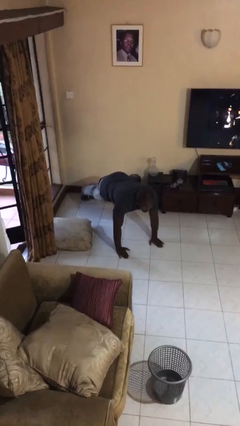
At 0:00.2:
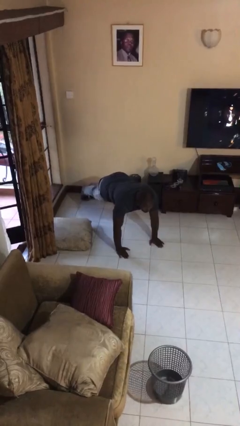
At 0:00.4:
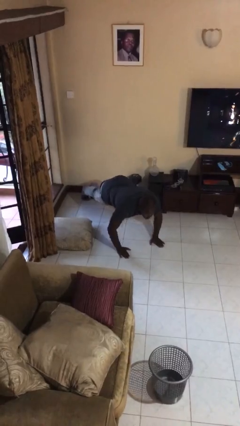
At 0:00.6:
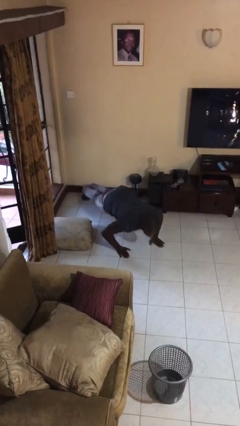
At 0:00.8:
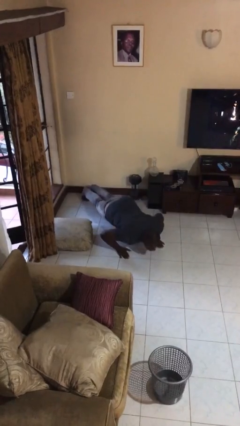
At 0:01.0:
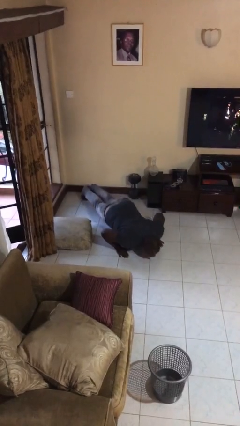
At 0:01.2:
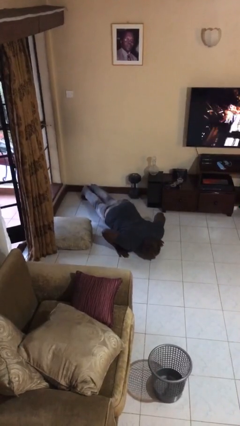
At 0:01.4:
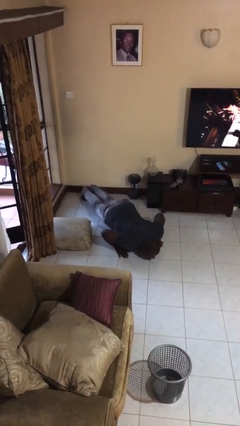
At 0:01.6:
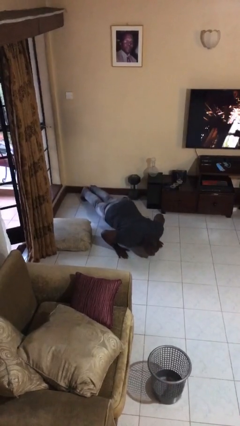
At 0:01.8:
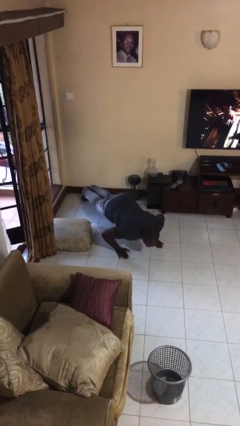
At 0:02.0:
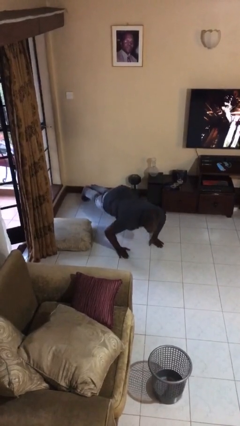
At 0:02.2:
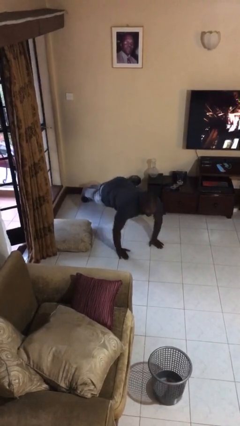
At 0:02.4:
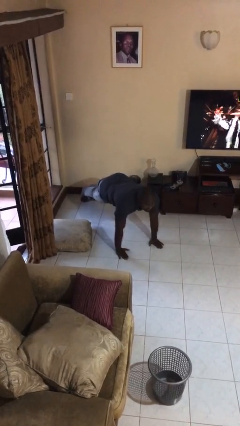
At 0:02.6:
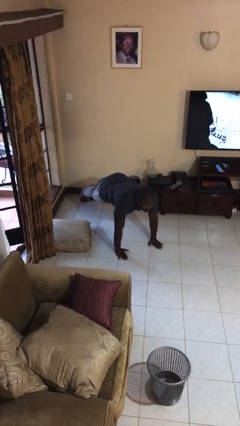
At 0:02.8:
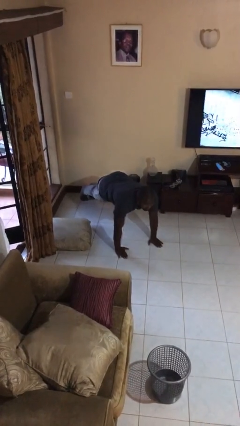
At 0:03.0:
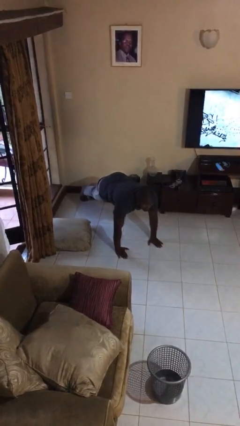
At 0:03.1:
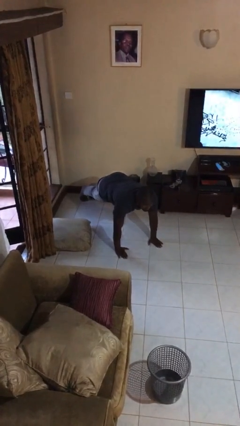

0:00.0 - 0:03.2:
person exercises with pushup

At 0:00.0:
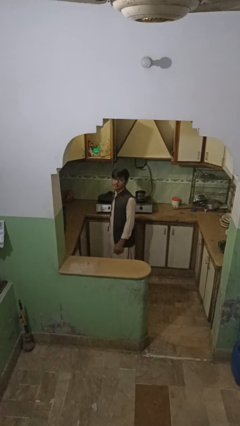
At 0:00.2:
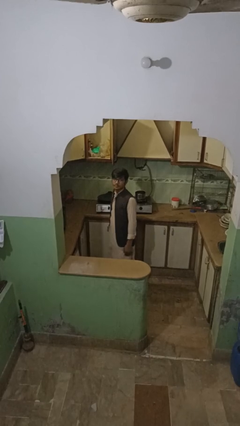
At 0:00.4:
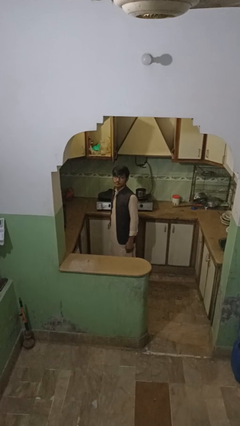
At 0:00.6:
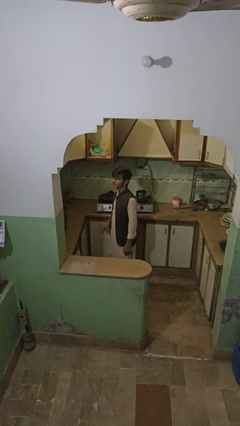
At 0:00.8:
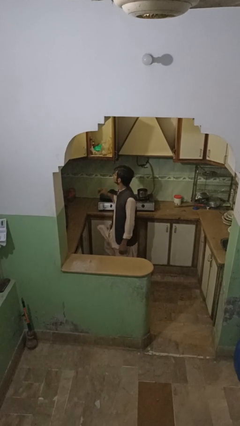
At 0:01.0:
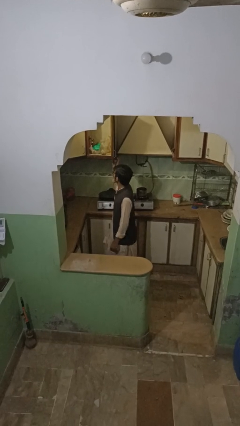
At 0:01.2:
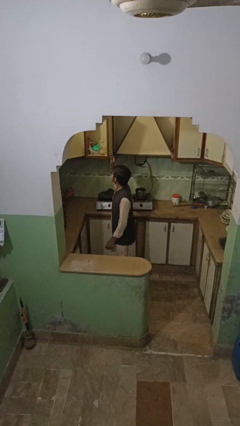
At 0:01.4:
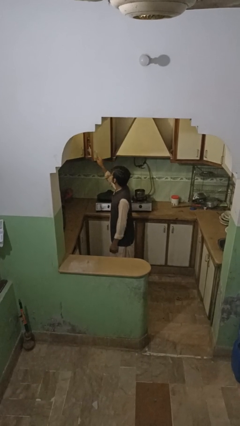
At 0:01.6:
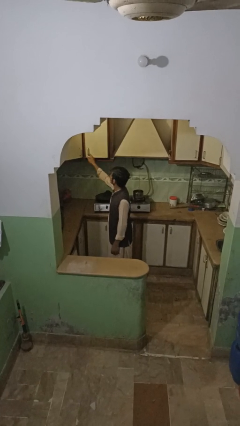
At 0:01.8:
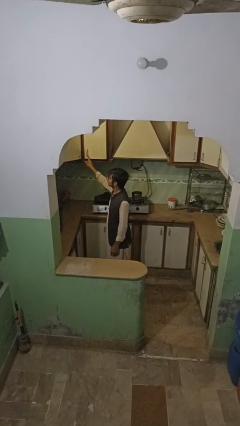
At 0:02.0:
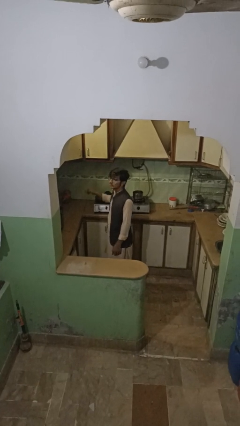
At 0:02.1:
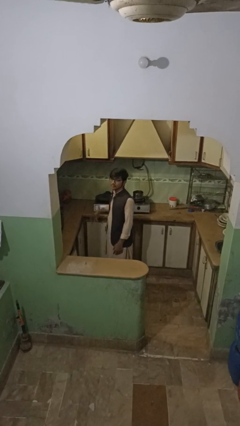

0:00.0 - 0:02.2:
person closes cabinet

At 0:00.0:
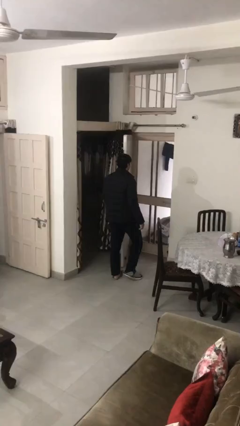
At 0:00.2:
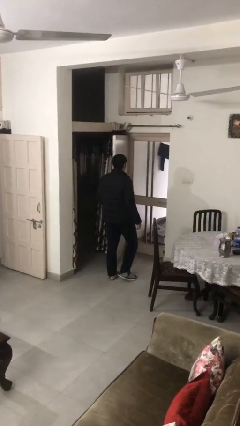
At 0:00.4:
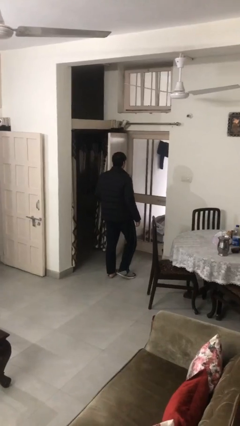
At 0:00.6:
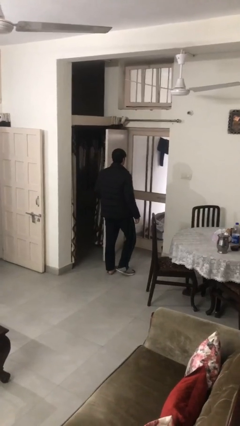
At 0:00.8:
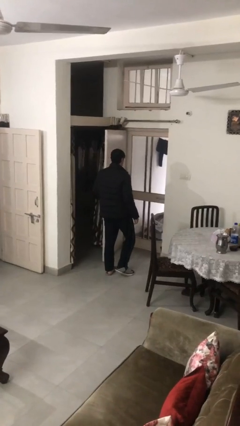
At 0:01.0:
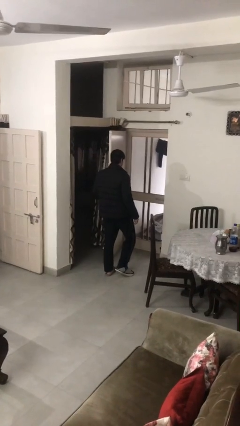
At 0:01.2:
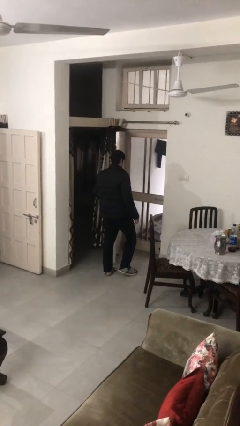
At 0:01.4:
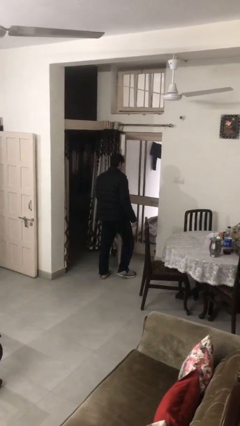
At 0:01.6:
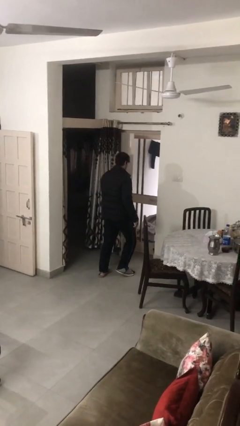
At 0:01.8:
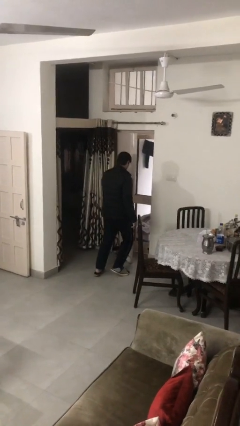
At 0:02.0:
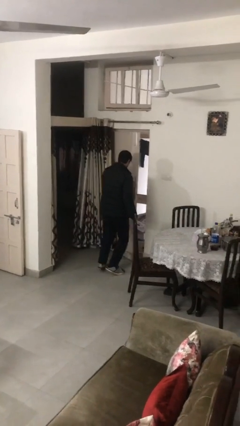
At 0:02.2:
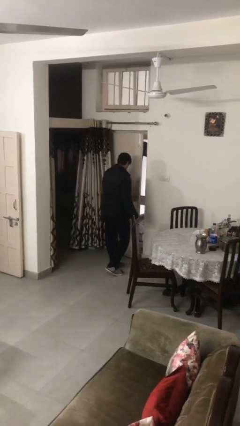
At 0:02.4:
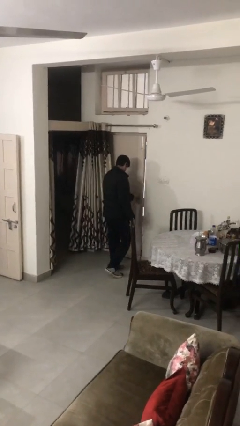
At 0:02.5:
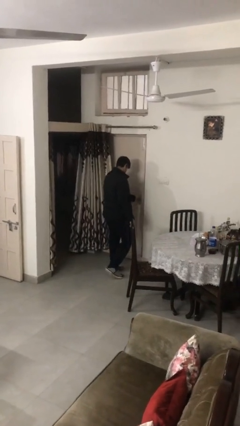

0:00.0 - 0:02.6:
person closes facility door

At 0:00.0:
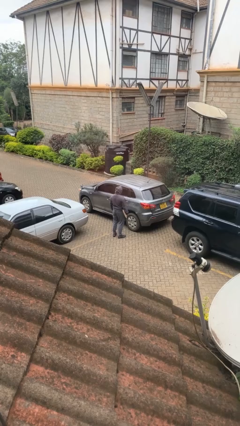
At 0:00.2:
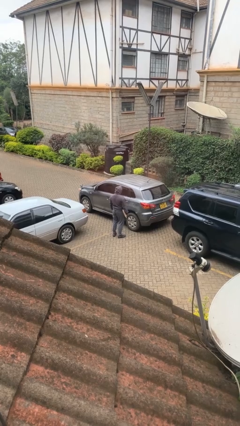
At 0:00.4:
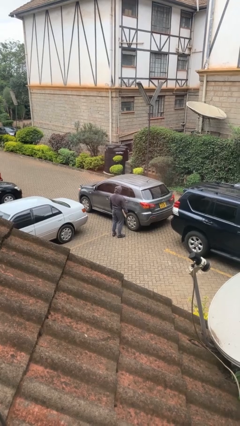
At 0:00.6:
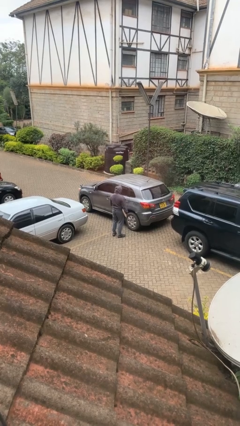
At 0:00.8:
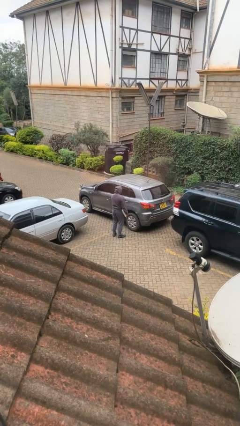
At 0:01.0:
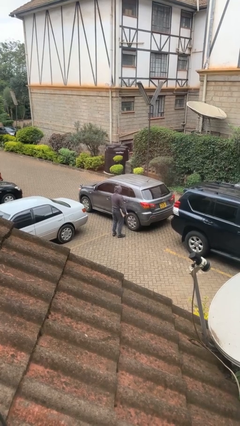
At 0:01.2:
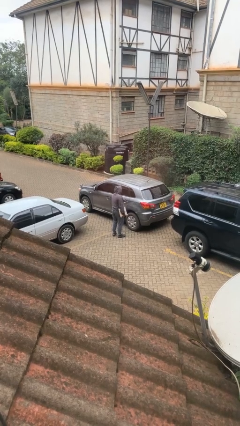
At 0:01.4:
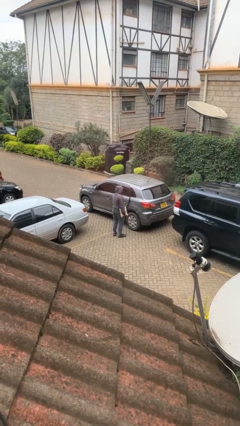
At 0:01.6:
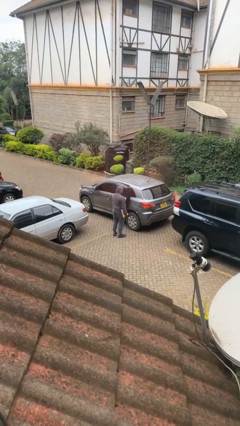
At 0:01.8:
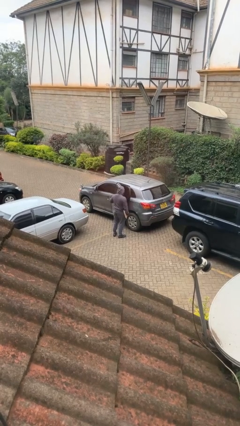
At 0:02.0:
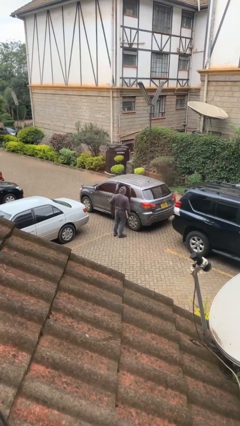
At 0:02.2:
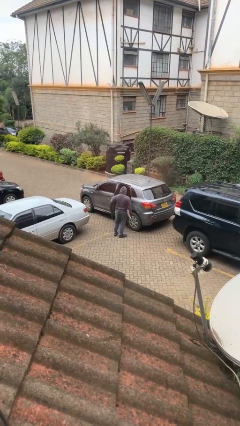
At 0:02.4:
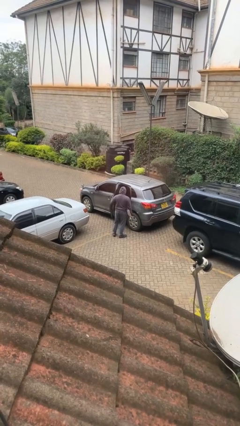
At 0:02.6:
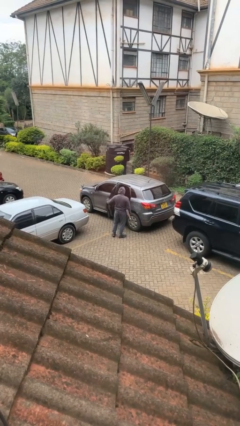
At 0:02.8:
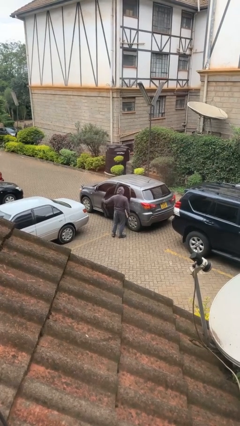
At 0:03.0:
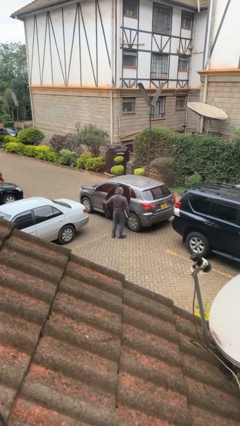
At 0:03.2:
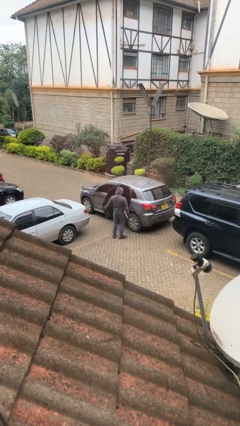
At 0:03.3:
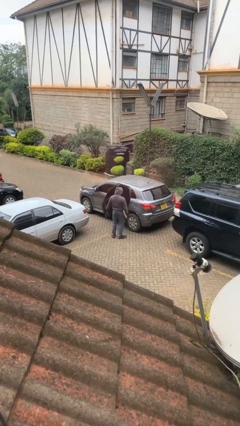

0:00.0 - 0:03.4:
person opens car door

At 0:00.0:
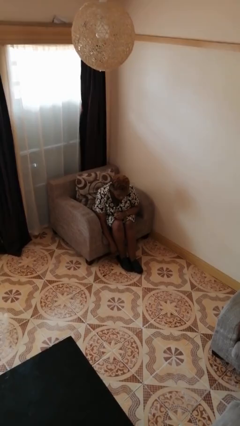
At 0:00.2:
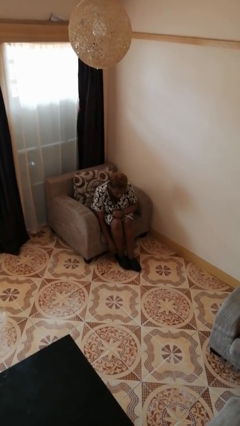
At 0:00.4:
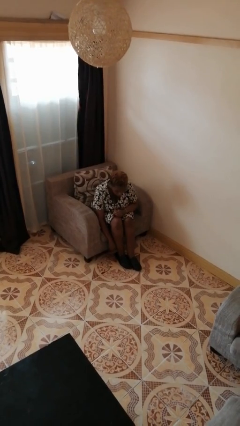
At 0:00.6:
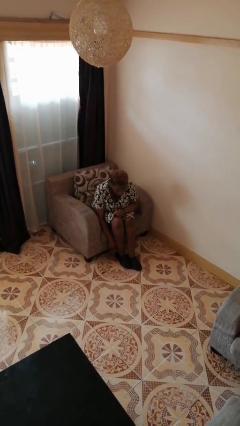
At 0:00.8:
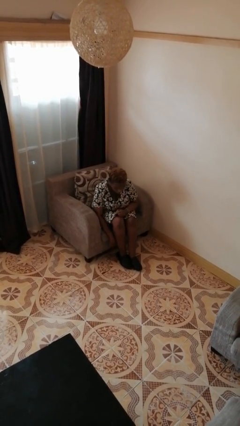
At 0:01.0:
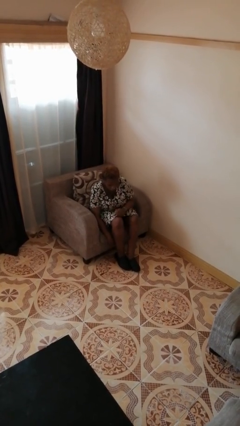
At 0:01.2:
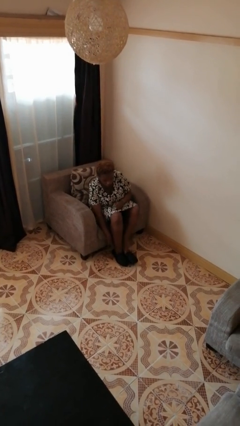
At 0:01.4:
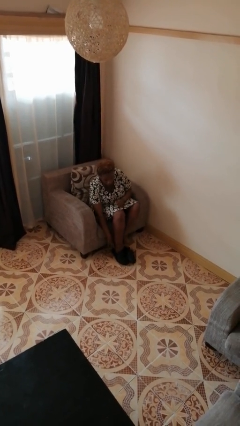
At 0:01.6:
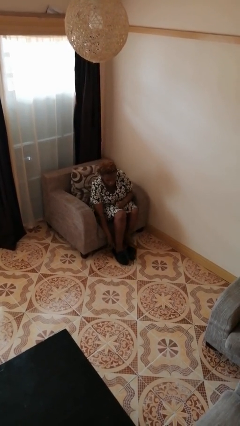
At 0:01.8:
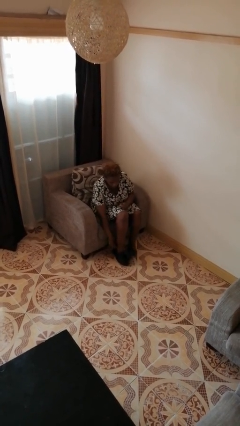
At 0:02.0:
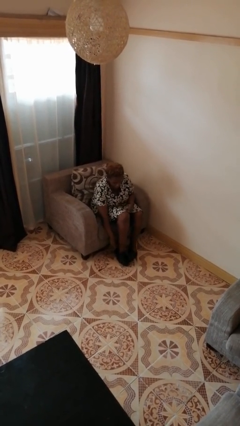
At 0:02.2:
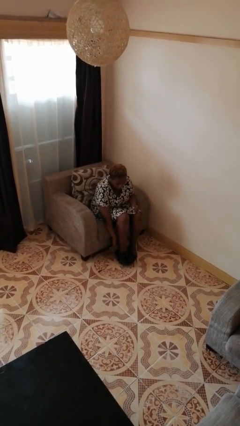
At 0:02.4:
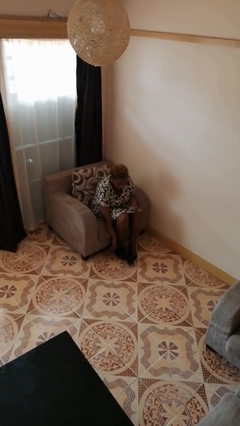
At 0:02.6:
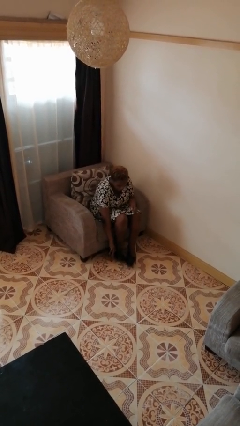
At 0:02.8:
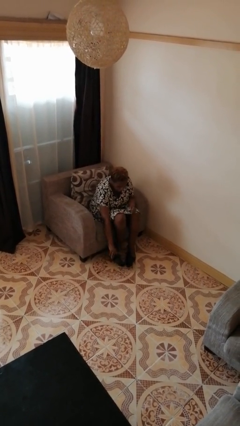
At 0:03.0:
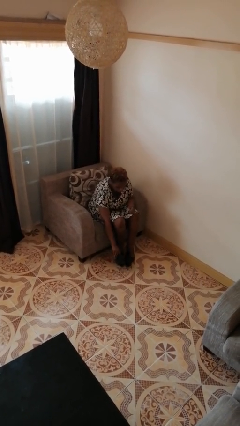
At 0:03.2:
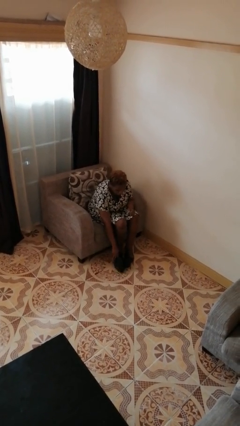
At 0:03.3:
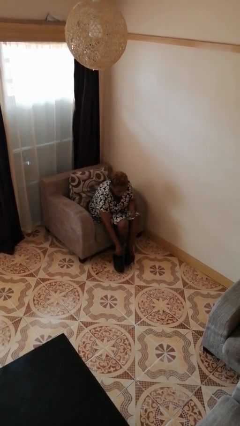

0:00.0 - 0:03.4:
person takes off shoes

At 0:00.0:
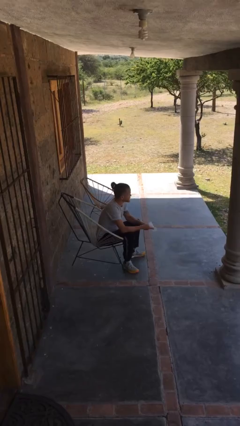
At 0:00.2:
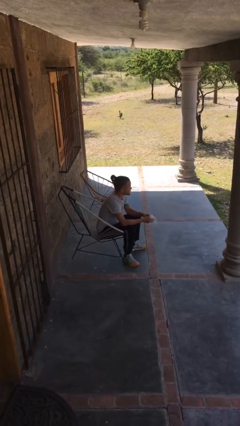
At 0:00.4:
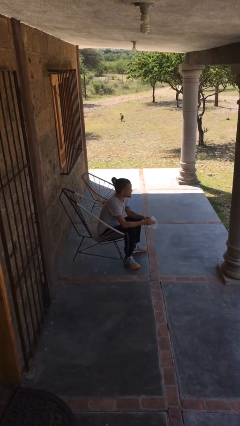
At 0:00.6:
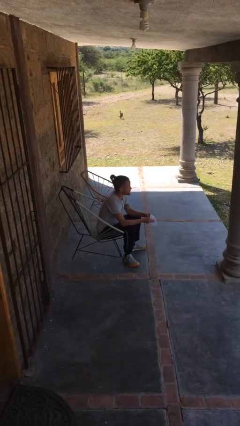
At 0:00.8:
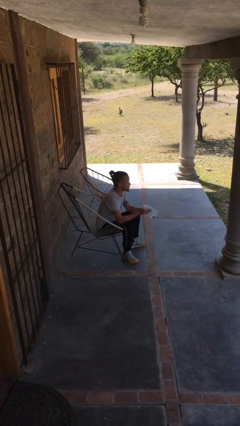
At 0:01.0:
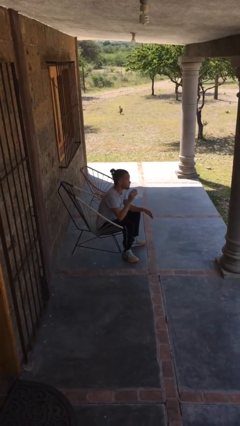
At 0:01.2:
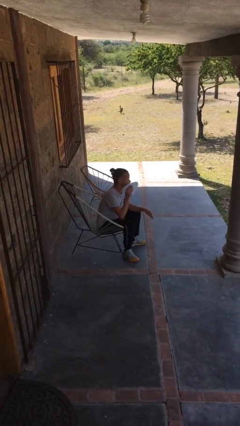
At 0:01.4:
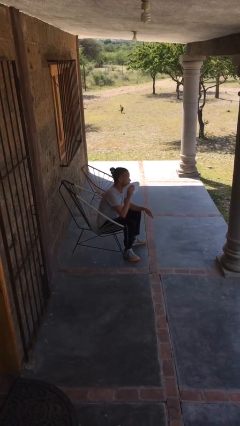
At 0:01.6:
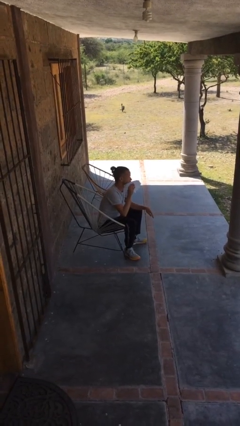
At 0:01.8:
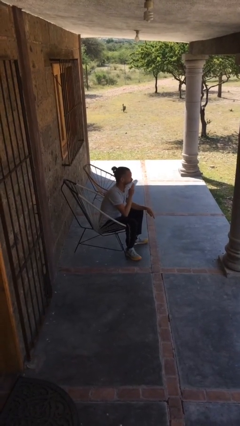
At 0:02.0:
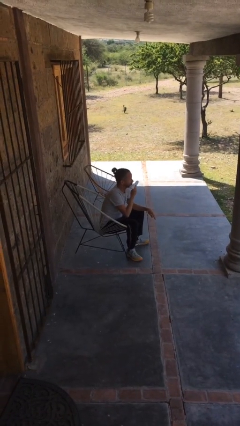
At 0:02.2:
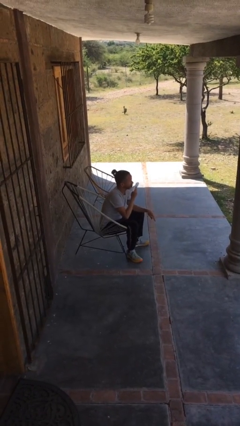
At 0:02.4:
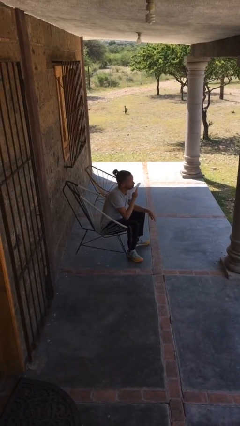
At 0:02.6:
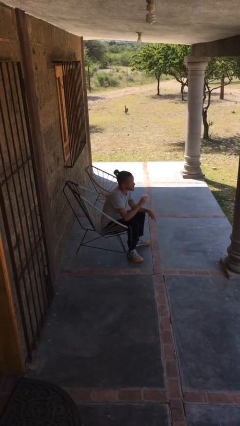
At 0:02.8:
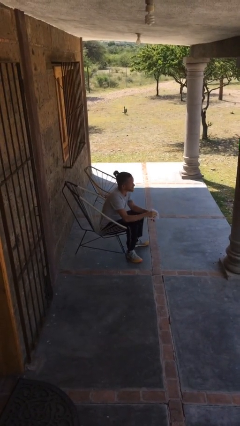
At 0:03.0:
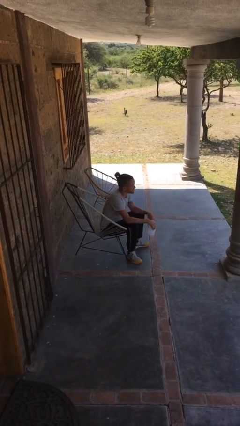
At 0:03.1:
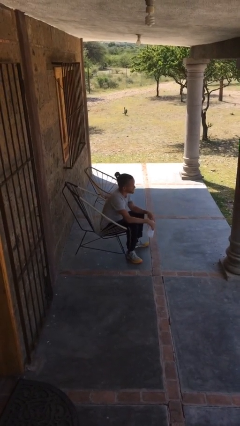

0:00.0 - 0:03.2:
person wipes mouth with napkin
